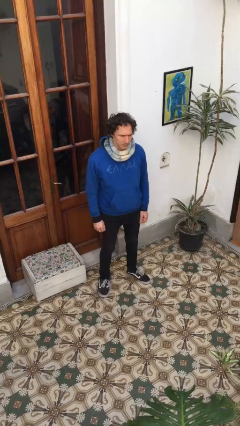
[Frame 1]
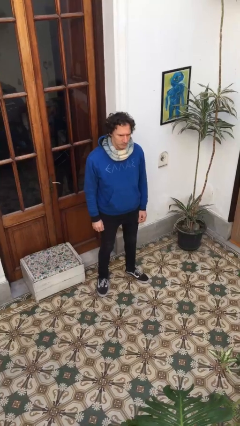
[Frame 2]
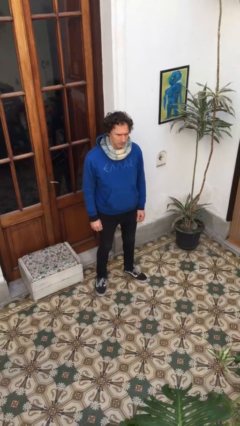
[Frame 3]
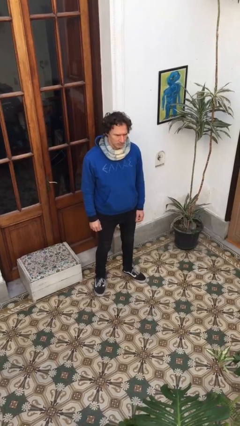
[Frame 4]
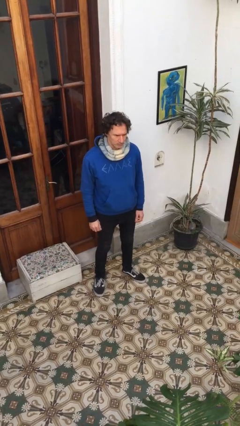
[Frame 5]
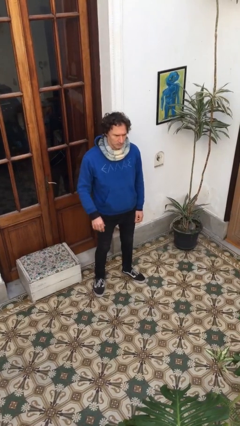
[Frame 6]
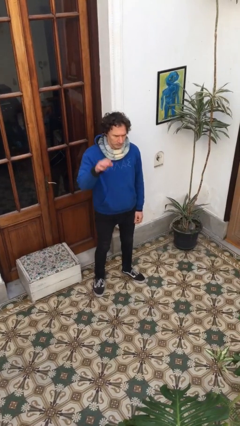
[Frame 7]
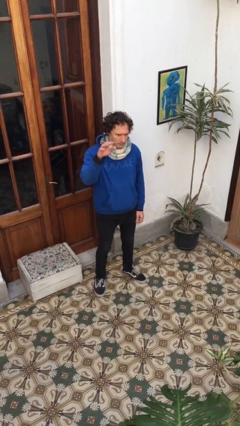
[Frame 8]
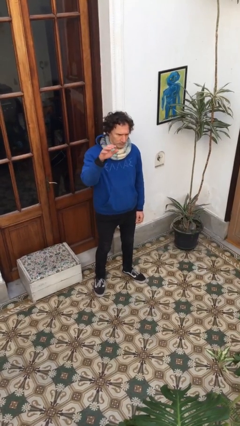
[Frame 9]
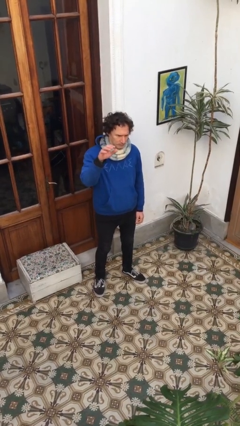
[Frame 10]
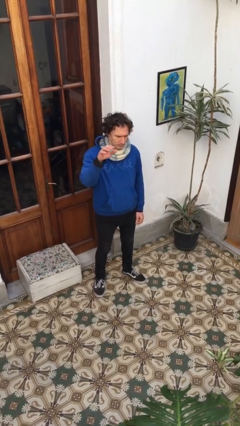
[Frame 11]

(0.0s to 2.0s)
person gestures swipe up

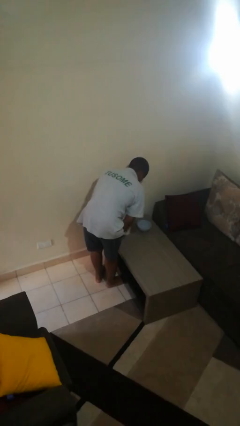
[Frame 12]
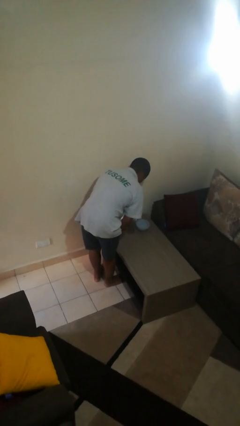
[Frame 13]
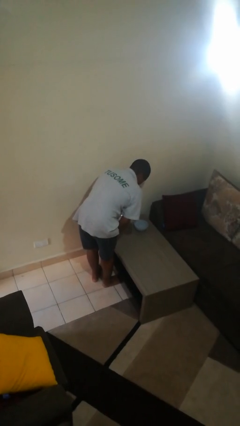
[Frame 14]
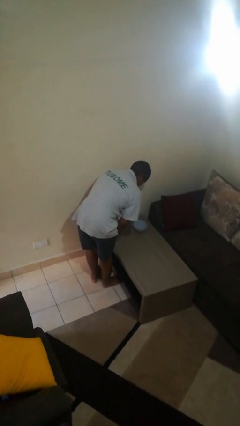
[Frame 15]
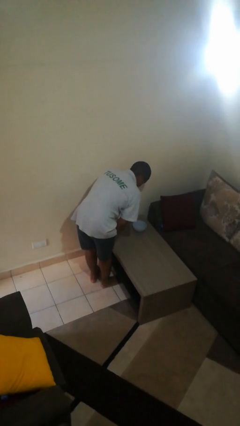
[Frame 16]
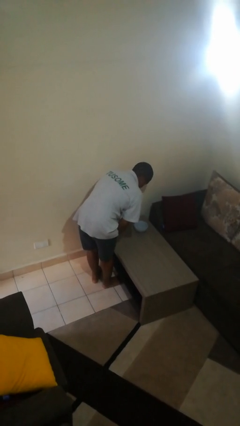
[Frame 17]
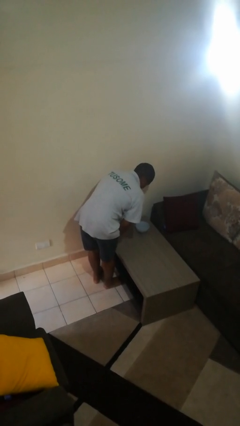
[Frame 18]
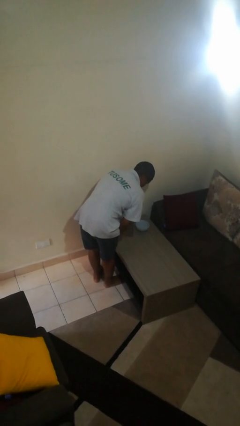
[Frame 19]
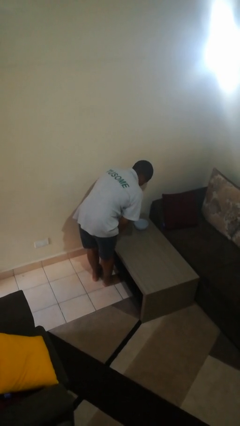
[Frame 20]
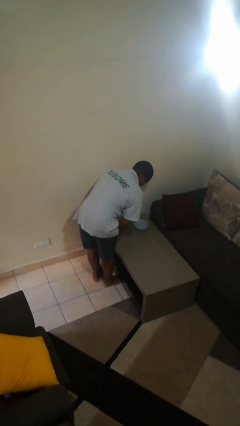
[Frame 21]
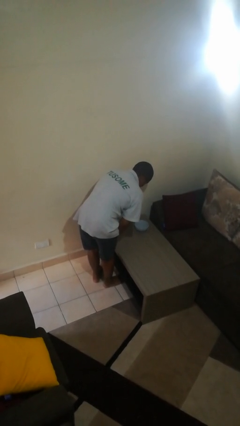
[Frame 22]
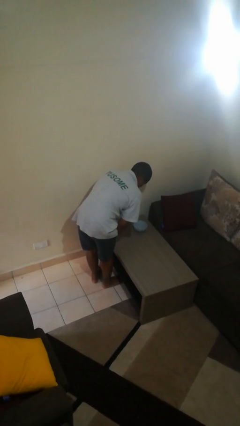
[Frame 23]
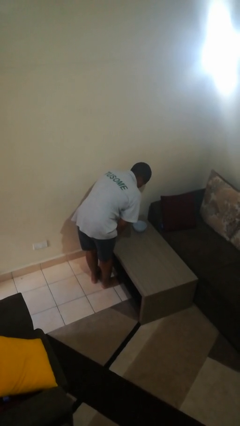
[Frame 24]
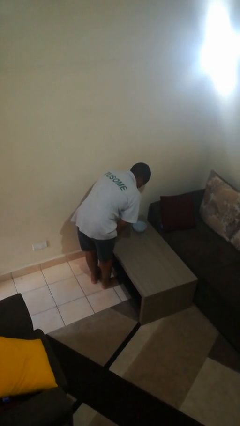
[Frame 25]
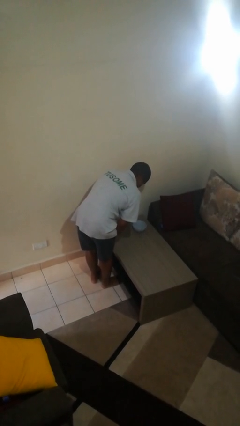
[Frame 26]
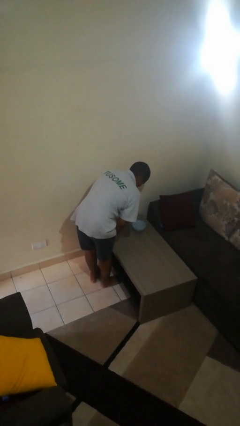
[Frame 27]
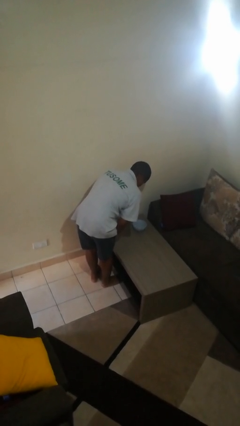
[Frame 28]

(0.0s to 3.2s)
person pours into bowl

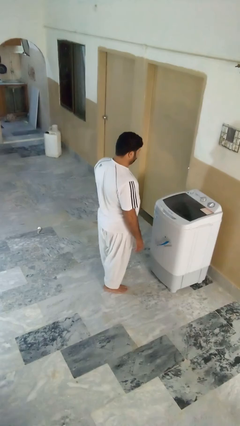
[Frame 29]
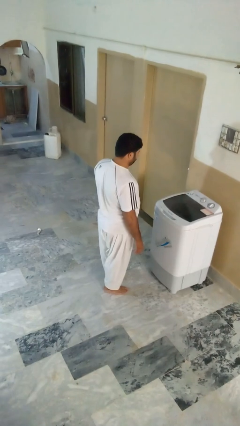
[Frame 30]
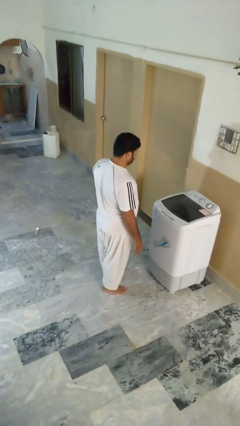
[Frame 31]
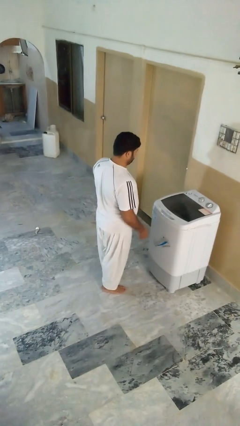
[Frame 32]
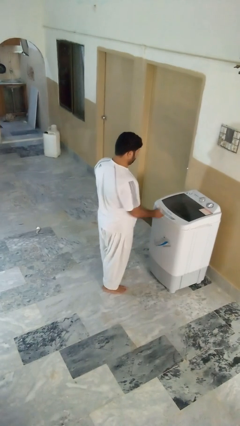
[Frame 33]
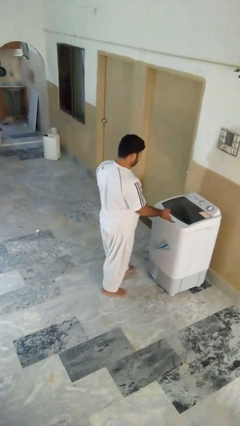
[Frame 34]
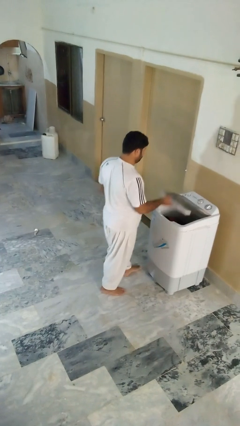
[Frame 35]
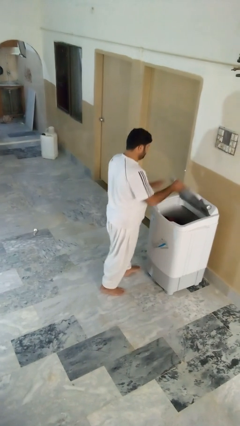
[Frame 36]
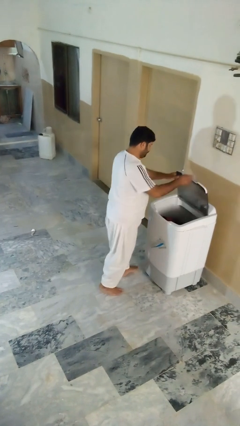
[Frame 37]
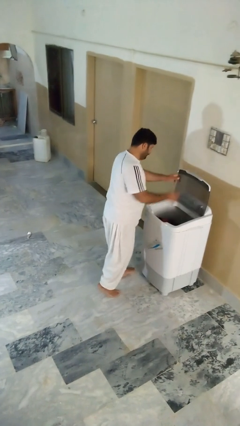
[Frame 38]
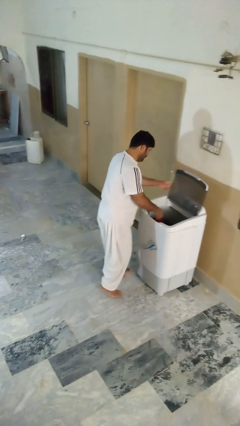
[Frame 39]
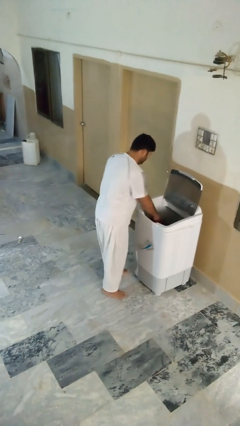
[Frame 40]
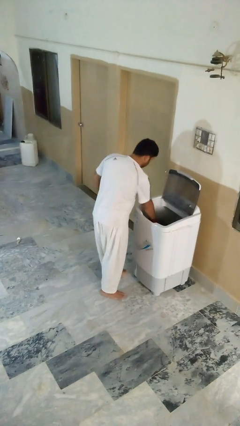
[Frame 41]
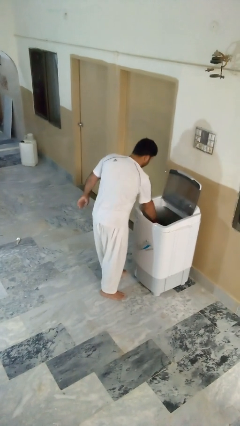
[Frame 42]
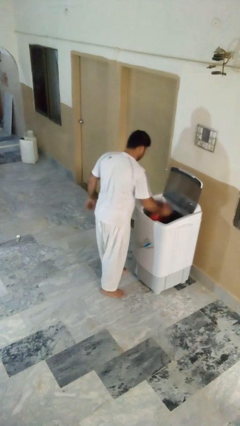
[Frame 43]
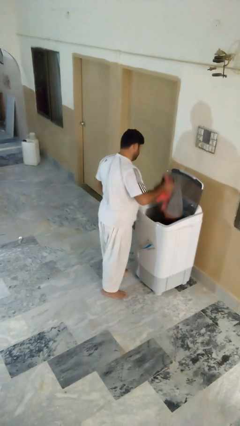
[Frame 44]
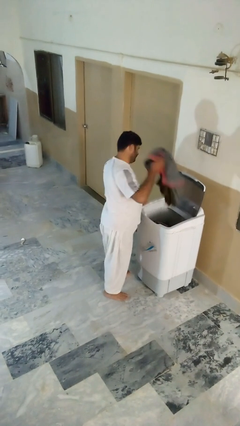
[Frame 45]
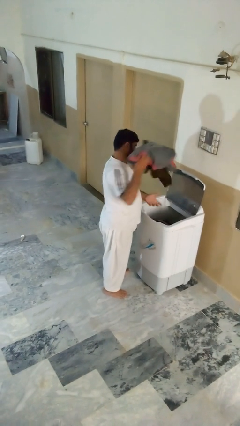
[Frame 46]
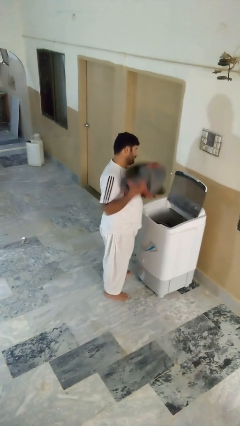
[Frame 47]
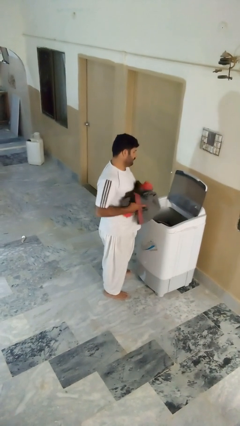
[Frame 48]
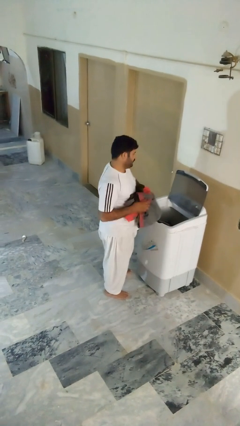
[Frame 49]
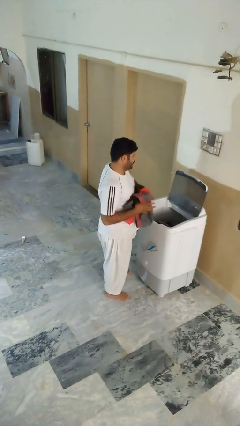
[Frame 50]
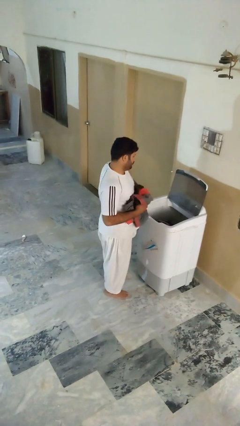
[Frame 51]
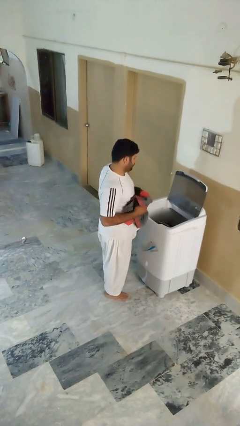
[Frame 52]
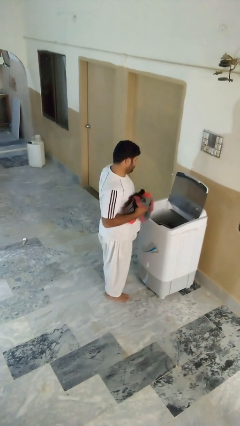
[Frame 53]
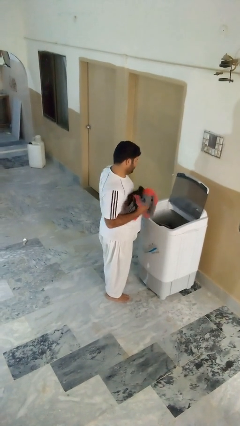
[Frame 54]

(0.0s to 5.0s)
person unloads clotheswasher

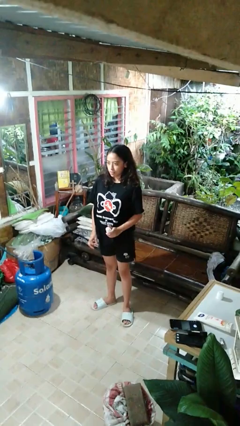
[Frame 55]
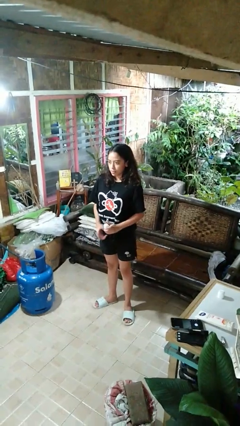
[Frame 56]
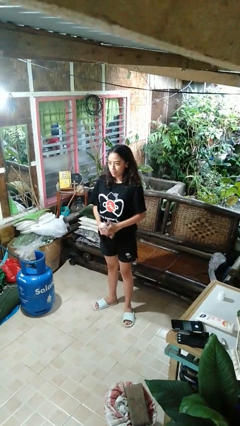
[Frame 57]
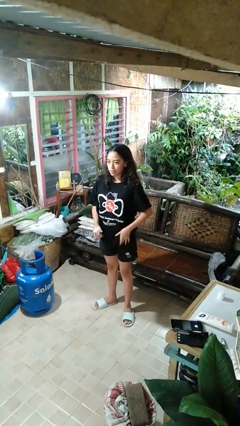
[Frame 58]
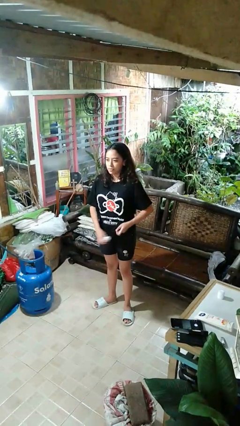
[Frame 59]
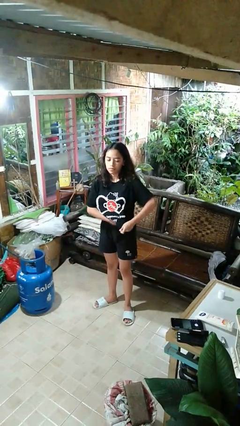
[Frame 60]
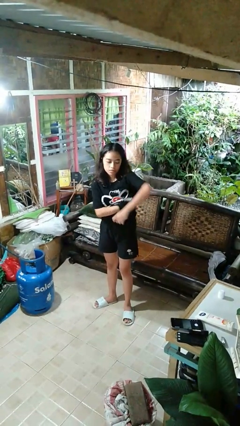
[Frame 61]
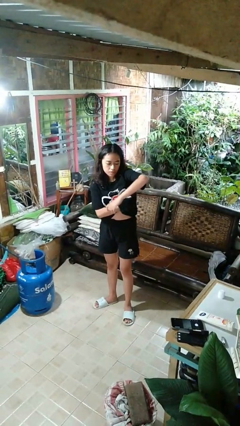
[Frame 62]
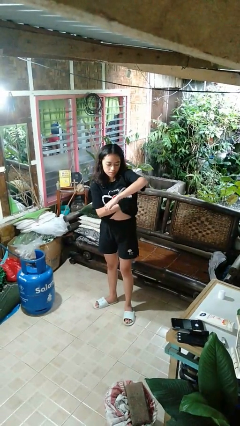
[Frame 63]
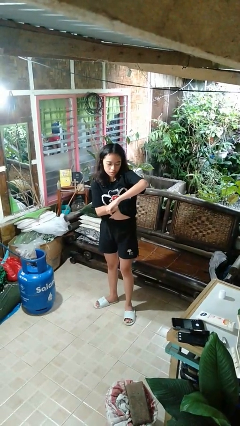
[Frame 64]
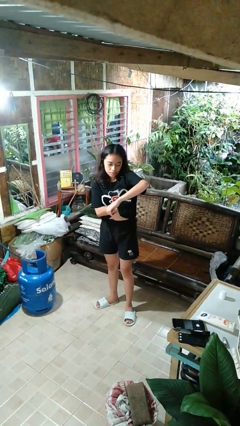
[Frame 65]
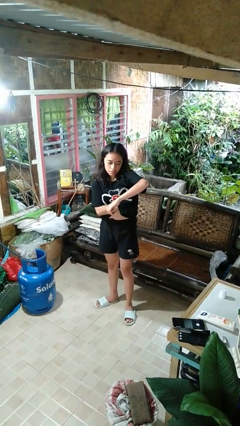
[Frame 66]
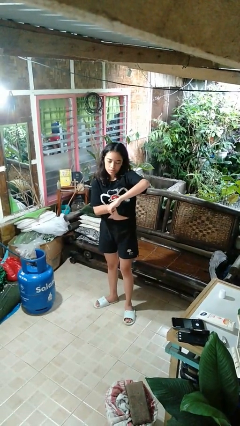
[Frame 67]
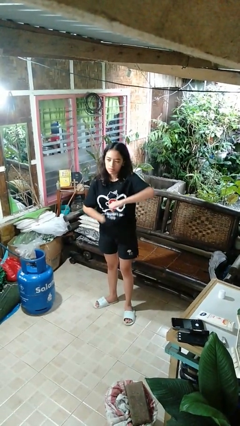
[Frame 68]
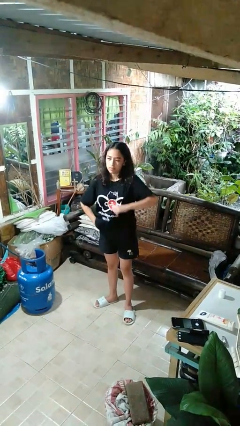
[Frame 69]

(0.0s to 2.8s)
person applies deodorant

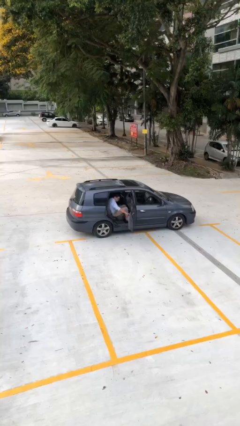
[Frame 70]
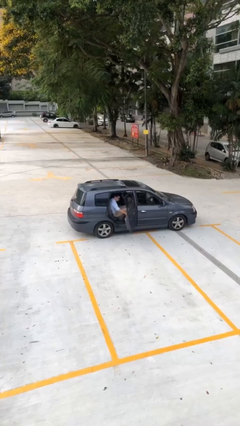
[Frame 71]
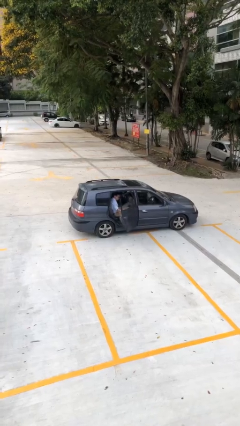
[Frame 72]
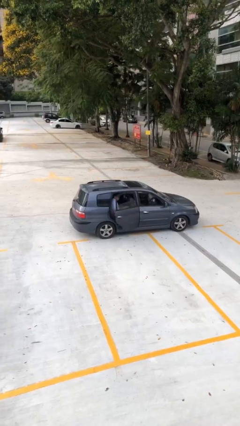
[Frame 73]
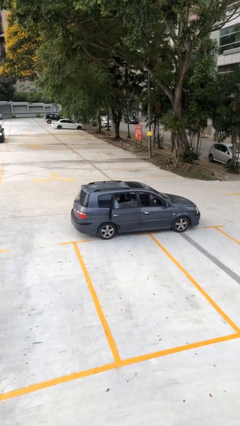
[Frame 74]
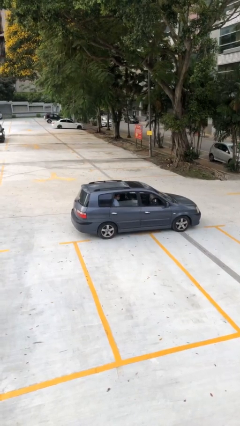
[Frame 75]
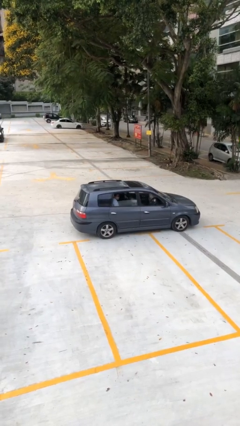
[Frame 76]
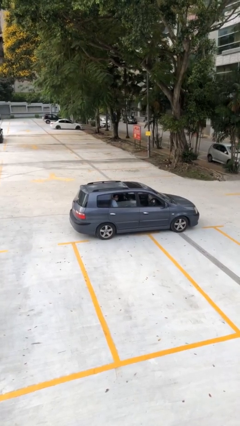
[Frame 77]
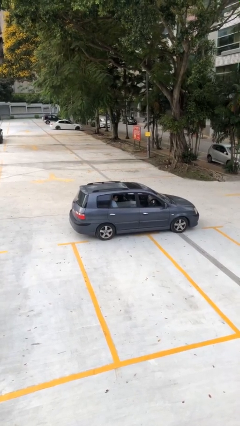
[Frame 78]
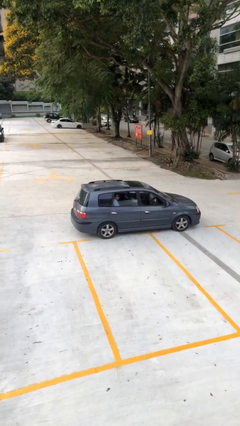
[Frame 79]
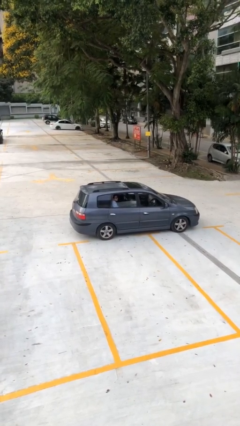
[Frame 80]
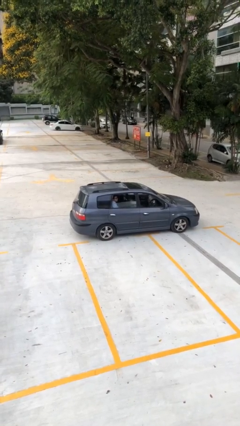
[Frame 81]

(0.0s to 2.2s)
person closes car door

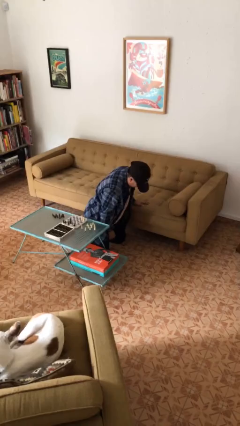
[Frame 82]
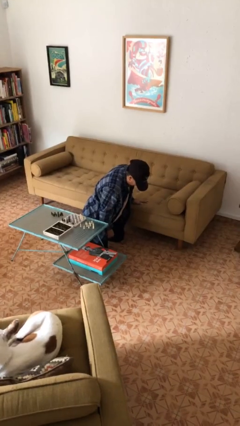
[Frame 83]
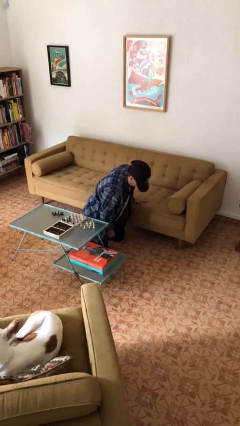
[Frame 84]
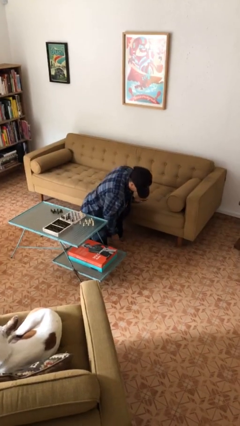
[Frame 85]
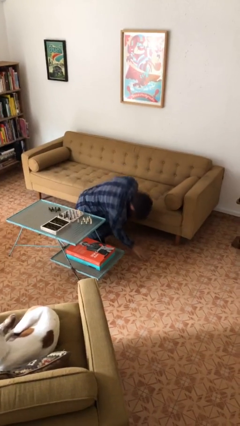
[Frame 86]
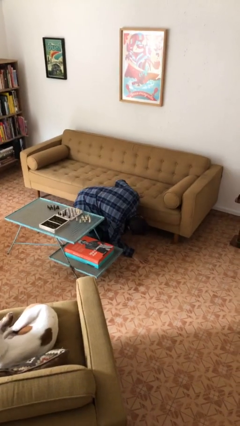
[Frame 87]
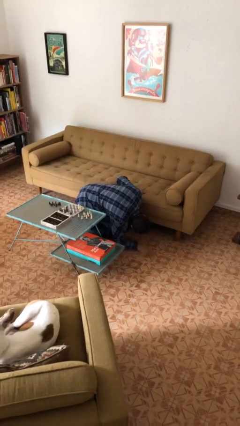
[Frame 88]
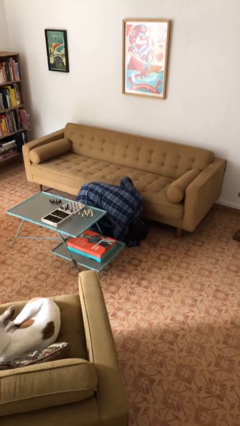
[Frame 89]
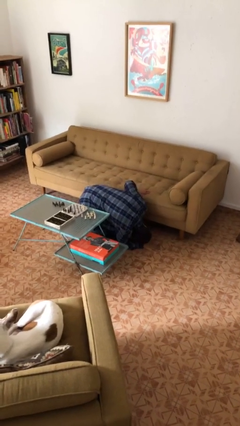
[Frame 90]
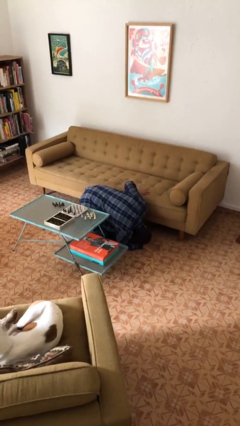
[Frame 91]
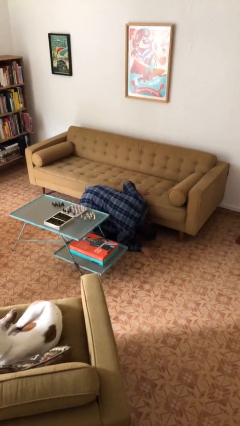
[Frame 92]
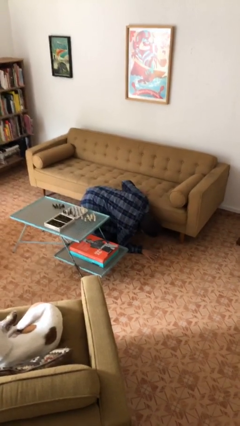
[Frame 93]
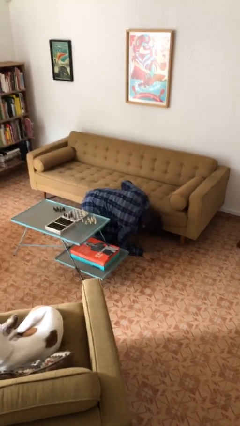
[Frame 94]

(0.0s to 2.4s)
person searches under couch
